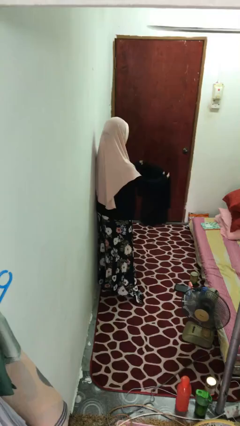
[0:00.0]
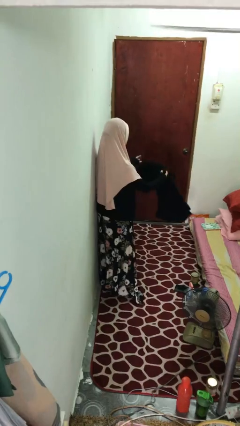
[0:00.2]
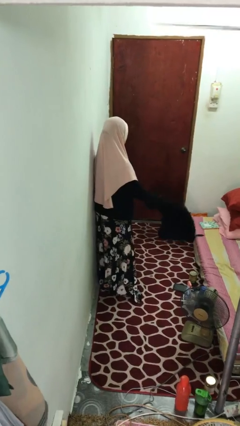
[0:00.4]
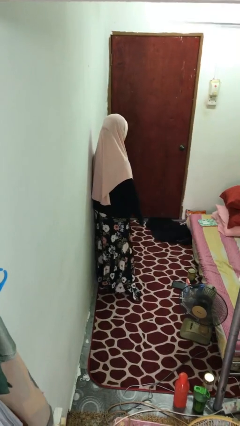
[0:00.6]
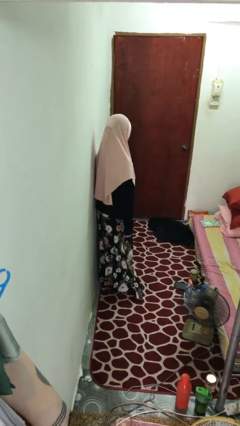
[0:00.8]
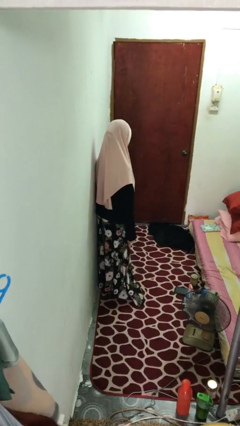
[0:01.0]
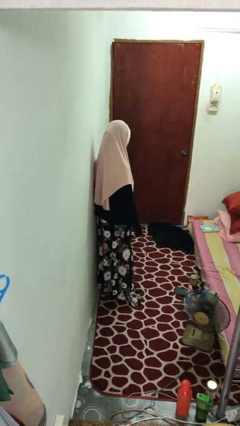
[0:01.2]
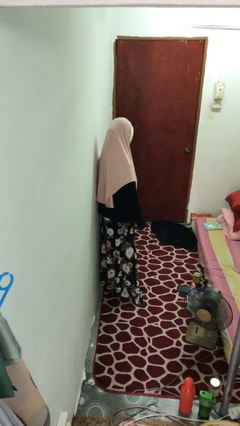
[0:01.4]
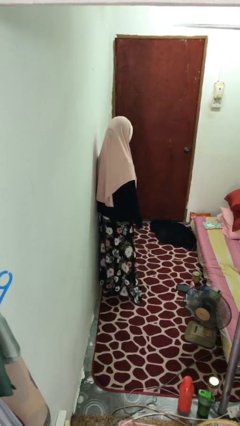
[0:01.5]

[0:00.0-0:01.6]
person throws object to ground

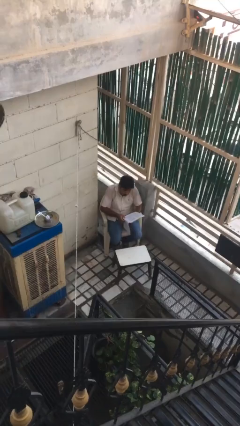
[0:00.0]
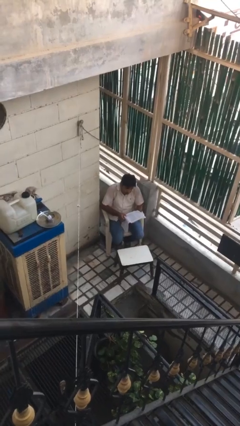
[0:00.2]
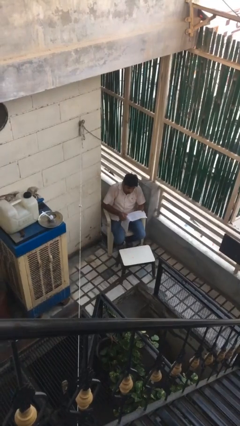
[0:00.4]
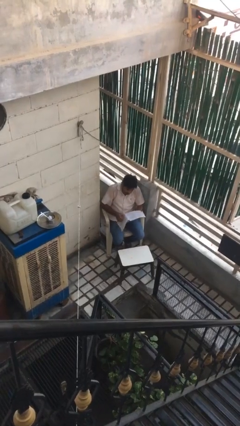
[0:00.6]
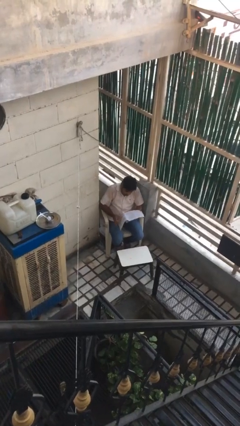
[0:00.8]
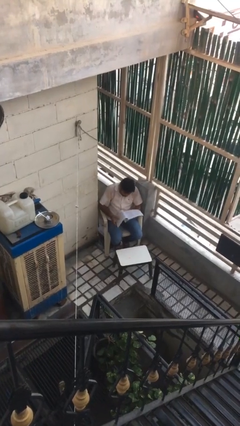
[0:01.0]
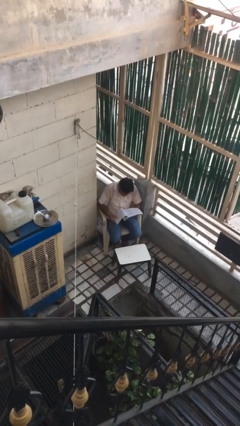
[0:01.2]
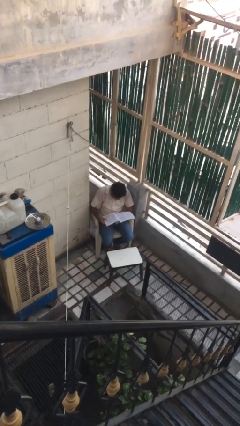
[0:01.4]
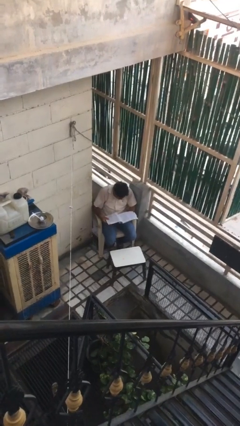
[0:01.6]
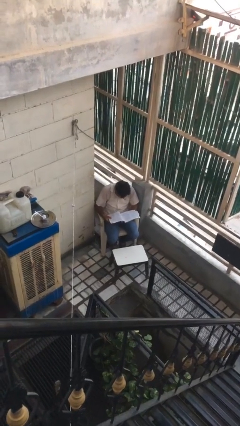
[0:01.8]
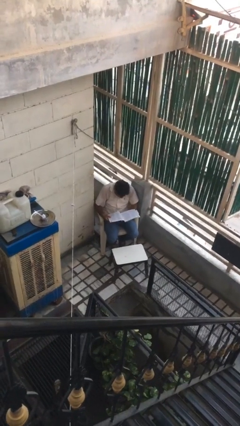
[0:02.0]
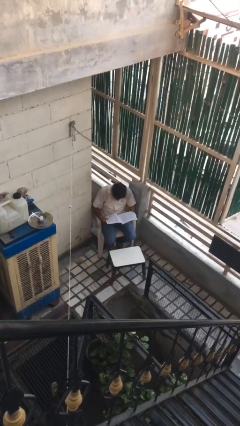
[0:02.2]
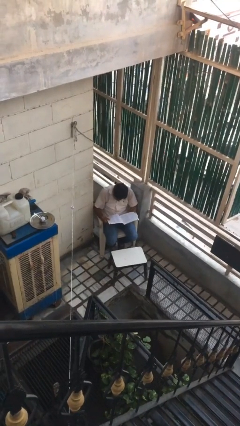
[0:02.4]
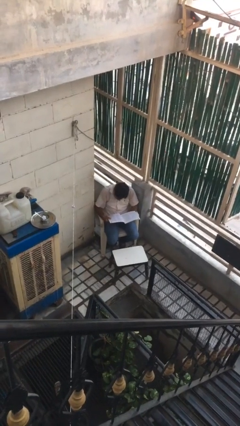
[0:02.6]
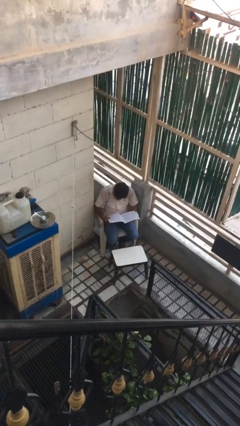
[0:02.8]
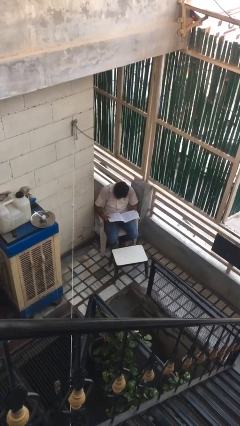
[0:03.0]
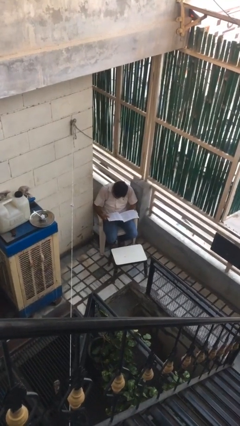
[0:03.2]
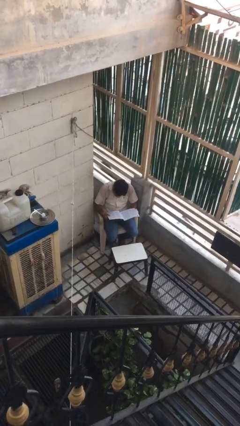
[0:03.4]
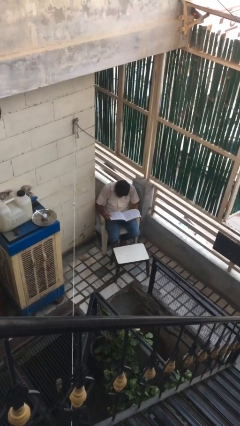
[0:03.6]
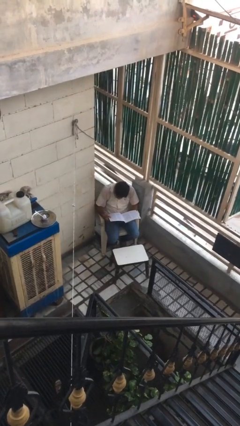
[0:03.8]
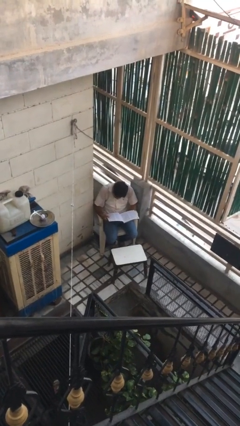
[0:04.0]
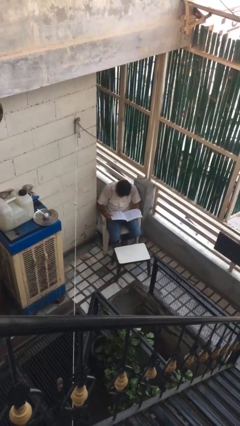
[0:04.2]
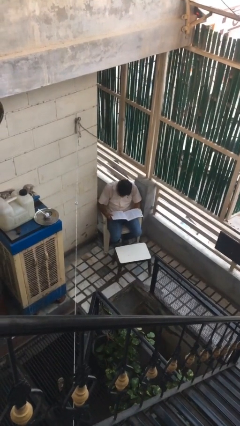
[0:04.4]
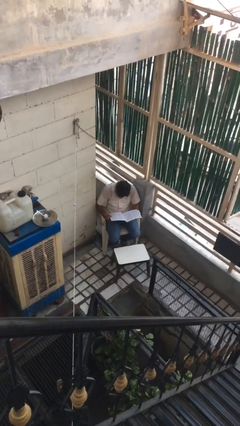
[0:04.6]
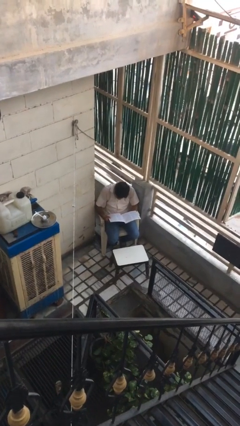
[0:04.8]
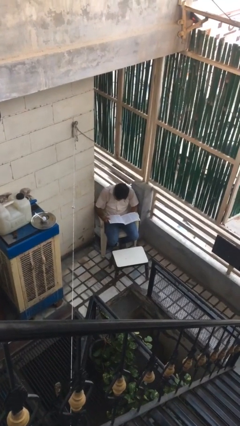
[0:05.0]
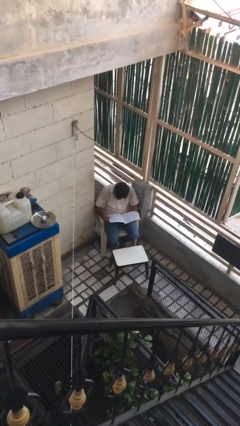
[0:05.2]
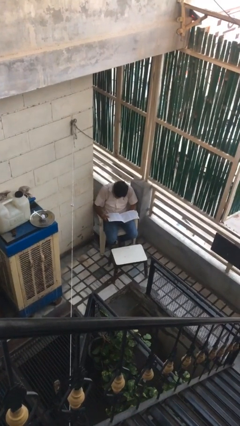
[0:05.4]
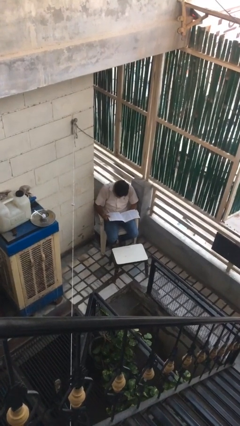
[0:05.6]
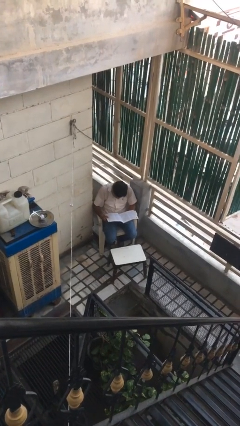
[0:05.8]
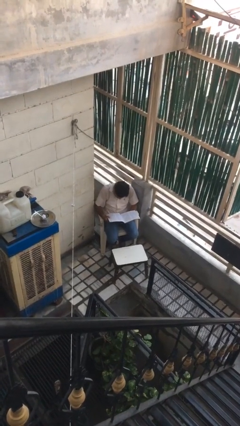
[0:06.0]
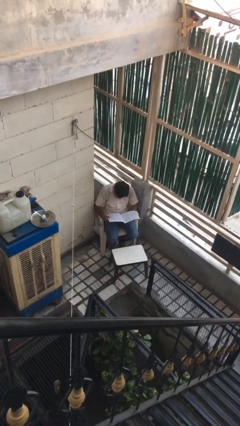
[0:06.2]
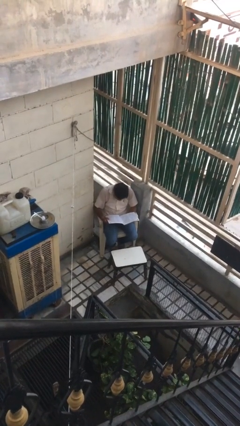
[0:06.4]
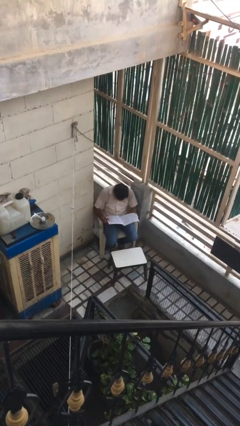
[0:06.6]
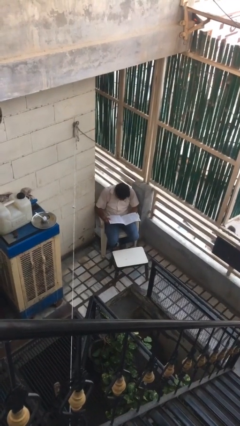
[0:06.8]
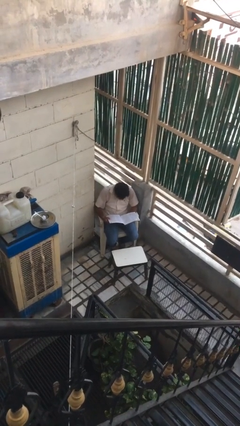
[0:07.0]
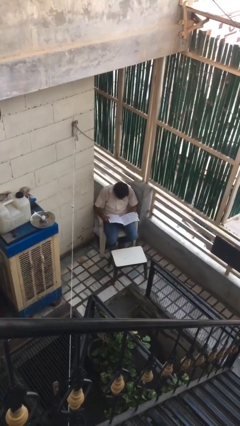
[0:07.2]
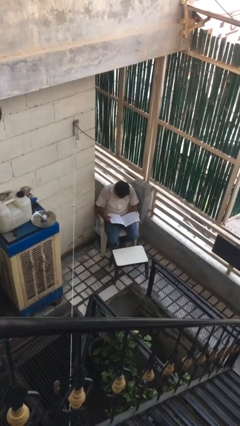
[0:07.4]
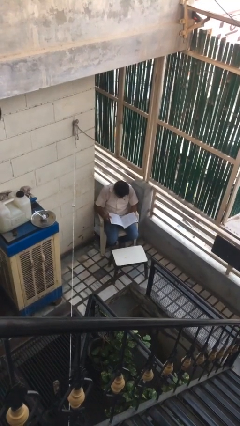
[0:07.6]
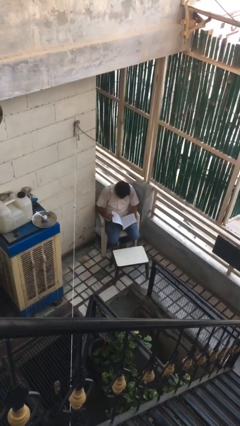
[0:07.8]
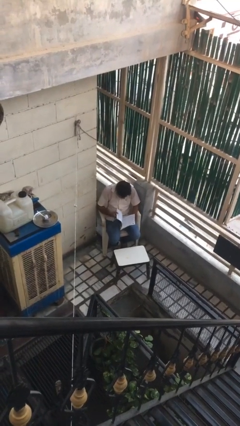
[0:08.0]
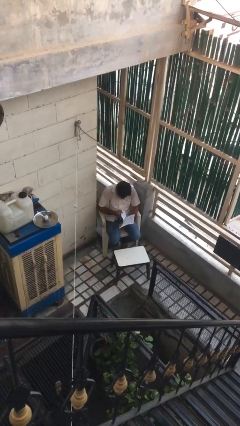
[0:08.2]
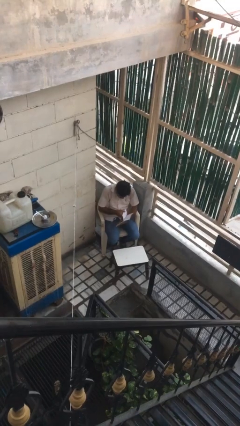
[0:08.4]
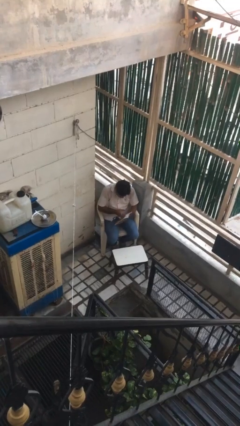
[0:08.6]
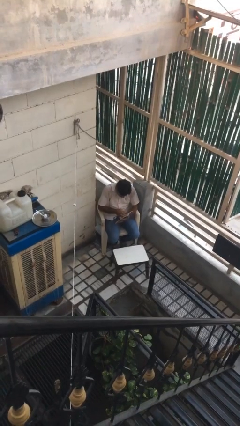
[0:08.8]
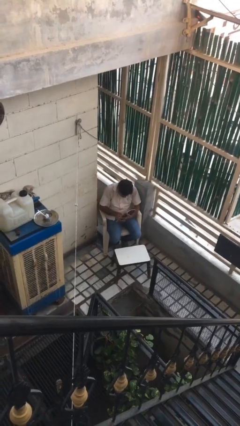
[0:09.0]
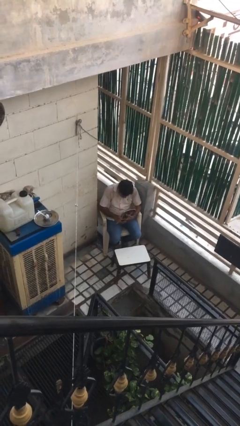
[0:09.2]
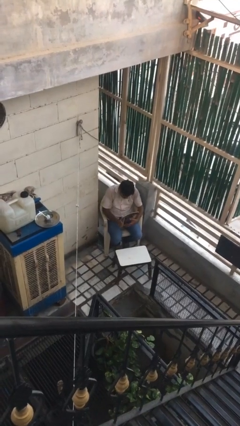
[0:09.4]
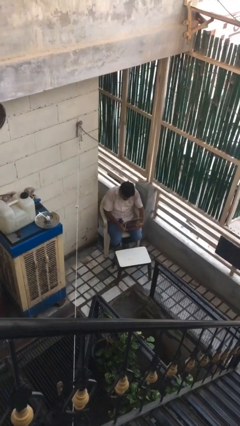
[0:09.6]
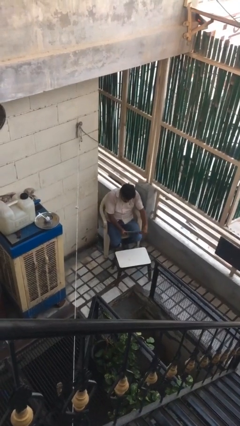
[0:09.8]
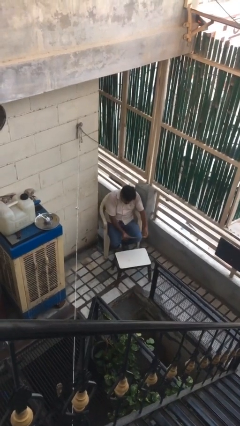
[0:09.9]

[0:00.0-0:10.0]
person reads document

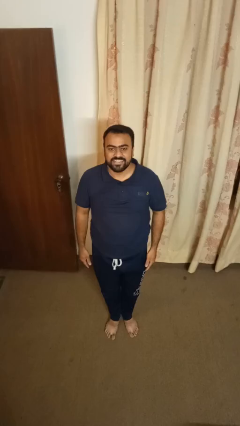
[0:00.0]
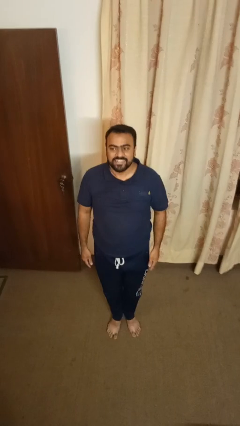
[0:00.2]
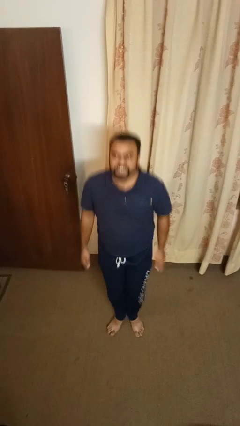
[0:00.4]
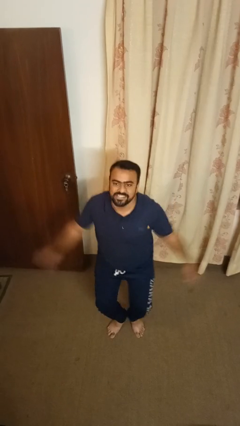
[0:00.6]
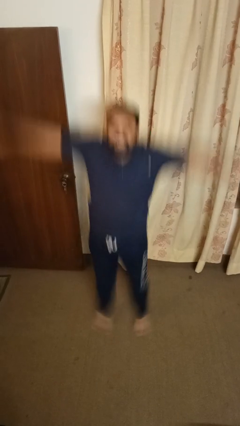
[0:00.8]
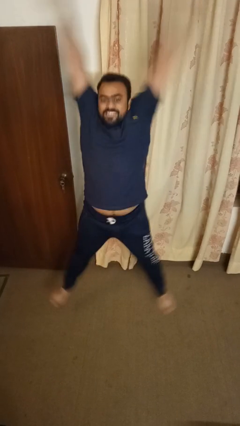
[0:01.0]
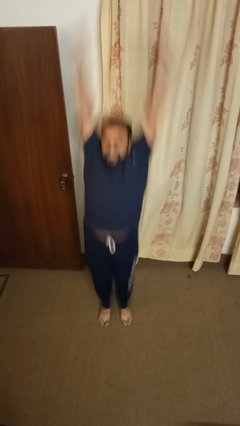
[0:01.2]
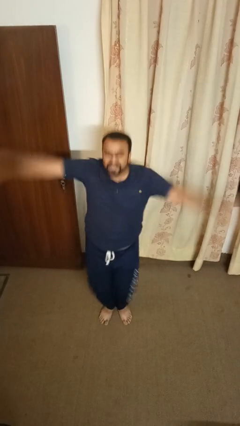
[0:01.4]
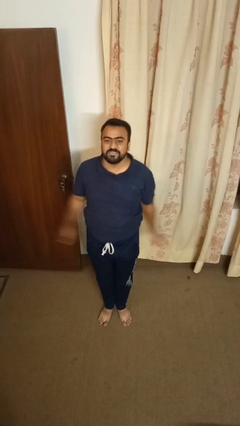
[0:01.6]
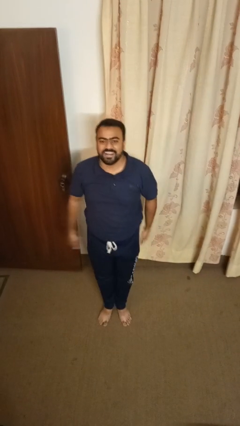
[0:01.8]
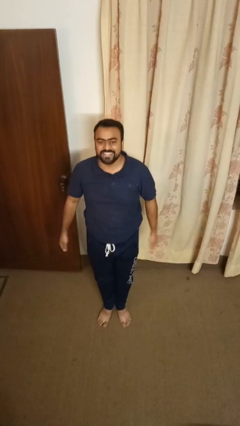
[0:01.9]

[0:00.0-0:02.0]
person exercises with jumping jacks

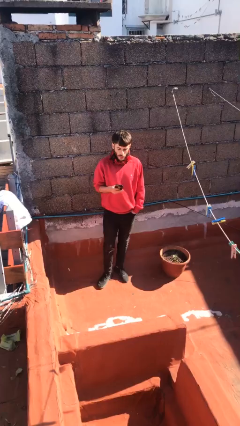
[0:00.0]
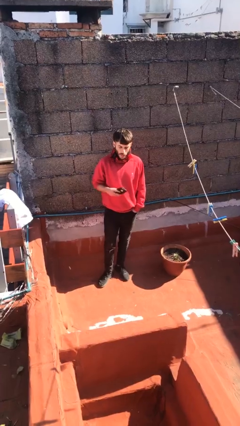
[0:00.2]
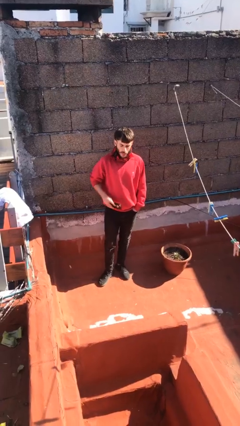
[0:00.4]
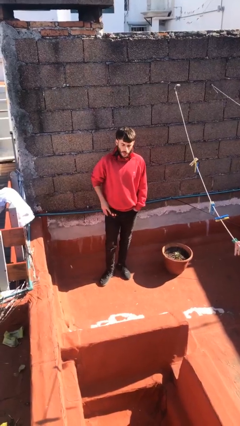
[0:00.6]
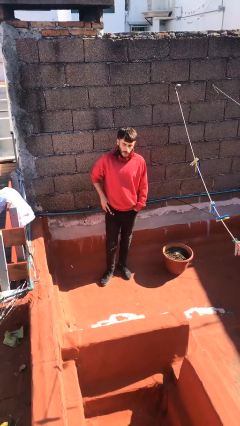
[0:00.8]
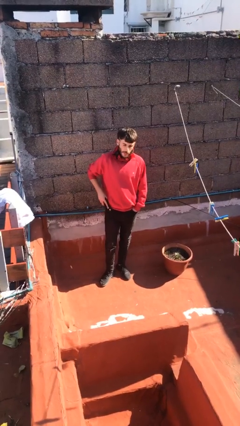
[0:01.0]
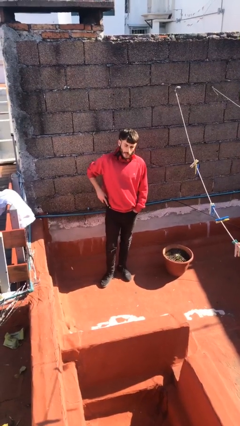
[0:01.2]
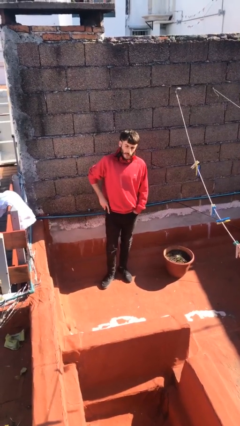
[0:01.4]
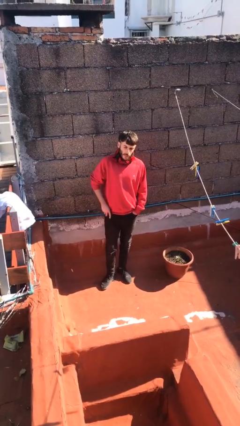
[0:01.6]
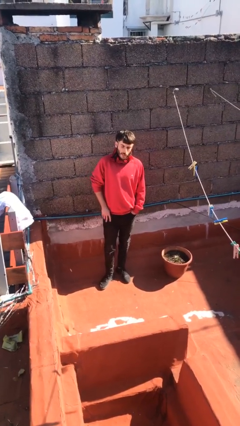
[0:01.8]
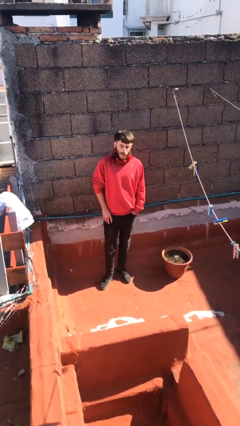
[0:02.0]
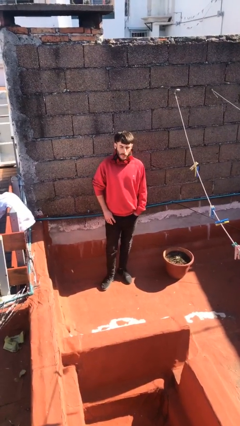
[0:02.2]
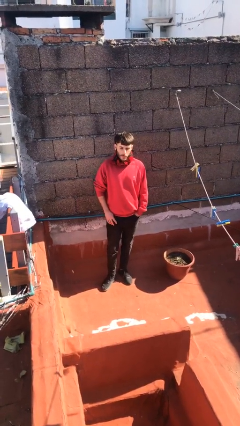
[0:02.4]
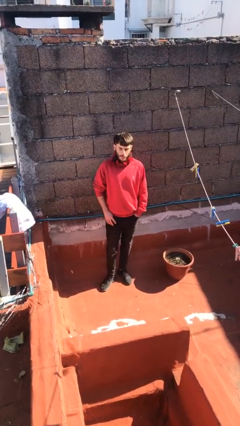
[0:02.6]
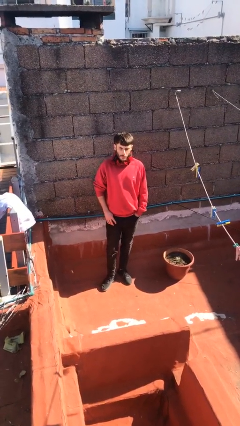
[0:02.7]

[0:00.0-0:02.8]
person puts phone into pocket

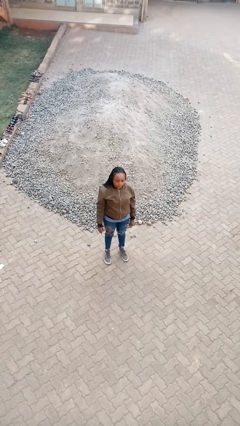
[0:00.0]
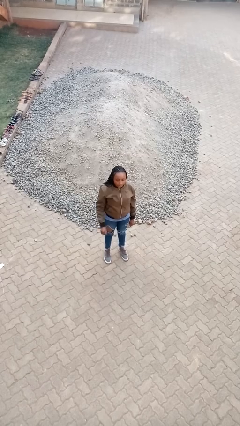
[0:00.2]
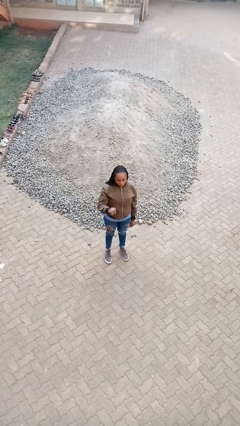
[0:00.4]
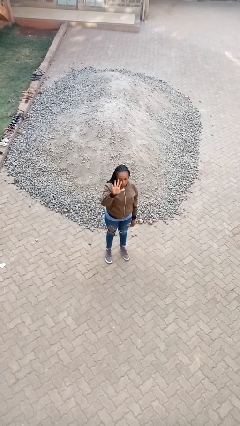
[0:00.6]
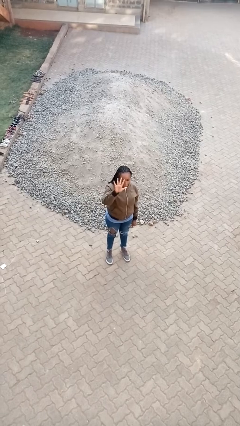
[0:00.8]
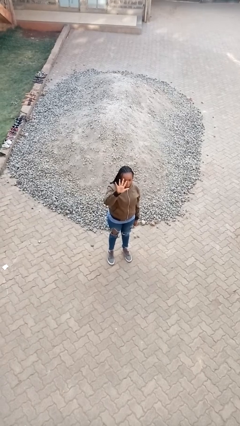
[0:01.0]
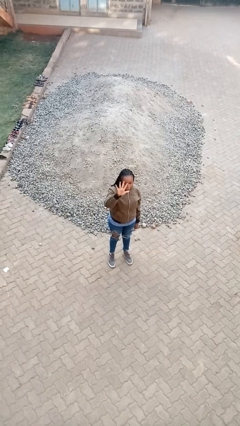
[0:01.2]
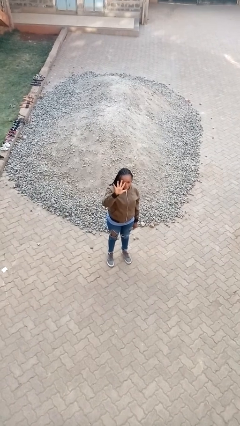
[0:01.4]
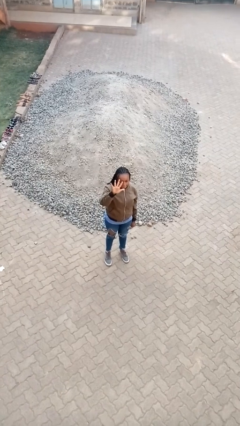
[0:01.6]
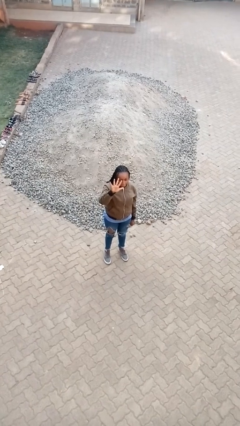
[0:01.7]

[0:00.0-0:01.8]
person gestures number five
